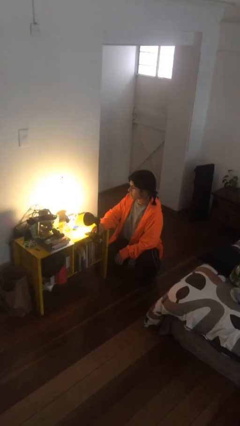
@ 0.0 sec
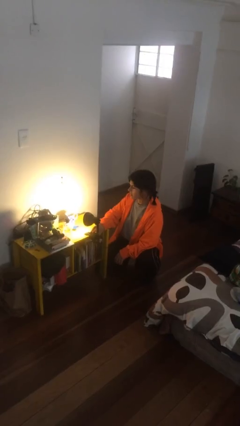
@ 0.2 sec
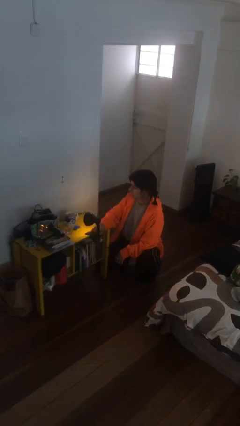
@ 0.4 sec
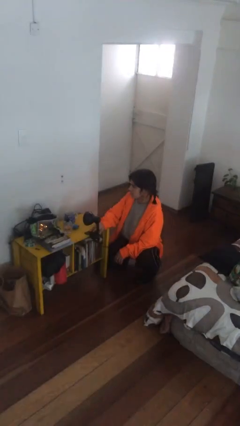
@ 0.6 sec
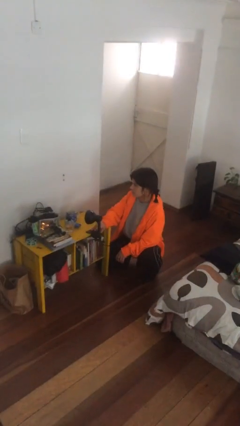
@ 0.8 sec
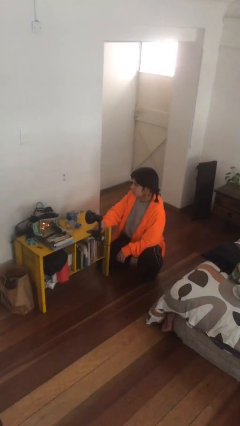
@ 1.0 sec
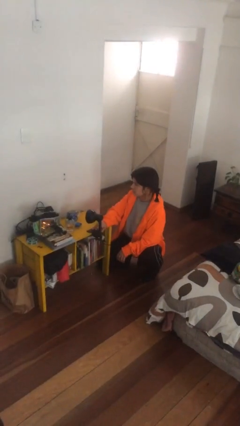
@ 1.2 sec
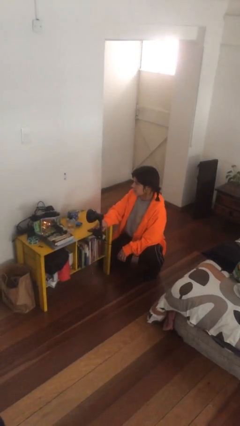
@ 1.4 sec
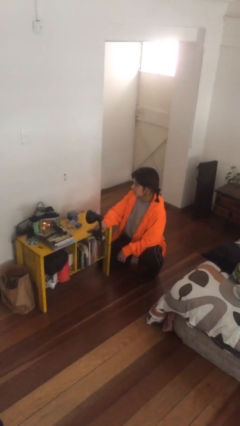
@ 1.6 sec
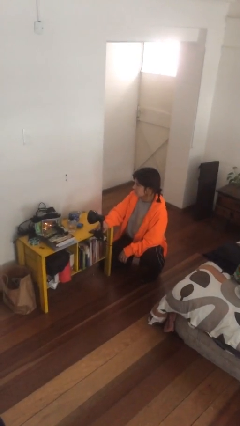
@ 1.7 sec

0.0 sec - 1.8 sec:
person turns off lamp

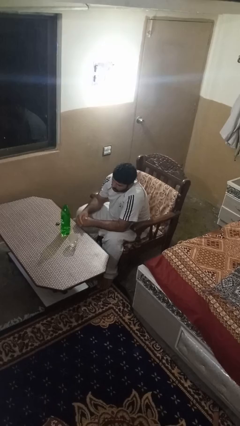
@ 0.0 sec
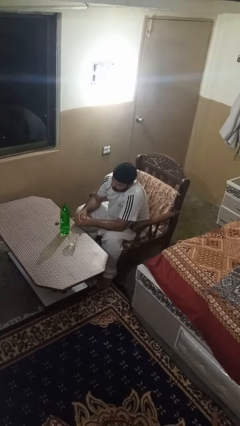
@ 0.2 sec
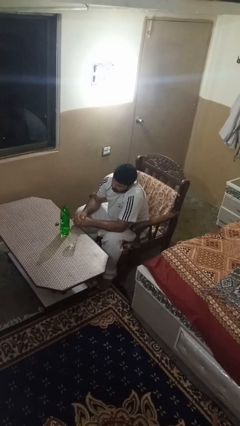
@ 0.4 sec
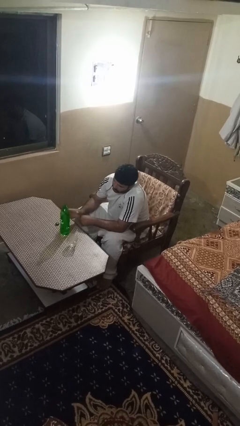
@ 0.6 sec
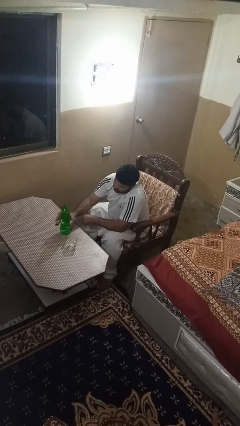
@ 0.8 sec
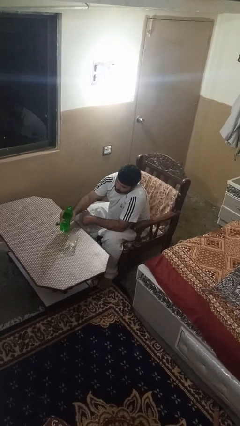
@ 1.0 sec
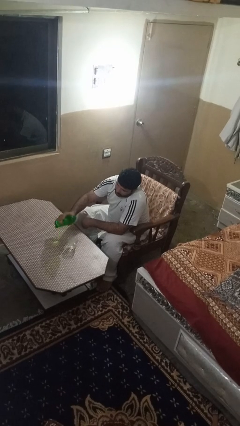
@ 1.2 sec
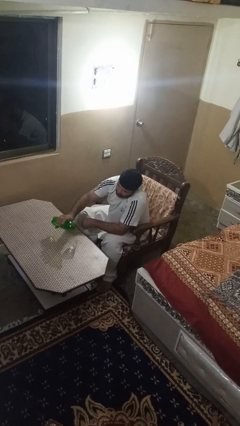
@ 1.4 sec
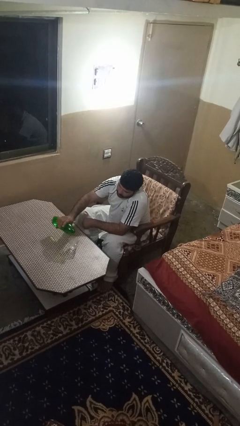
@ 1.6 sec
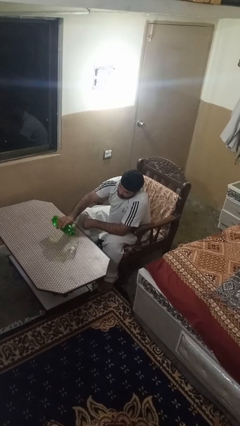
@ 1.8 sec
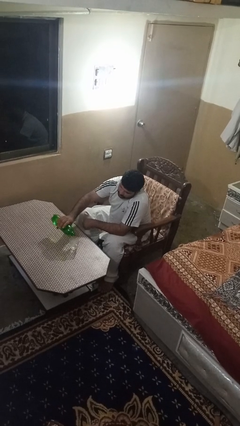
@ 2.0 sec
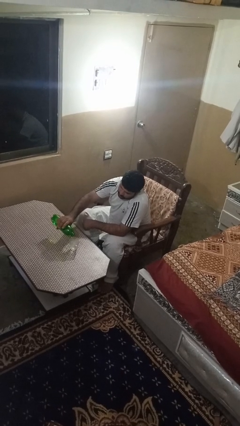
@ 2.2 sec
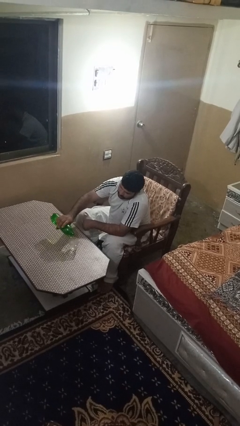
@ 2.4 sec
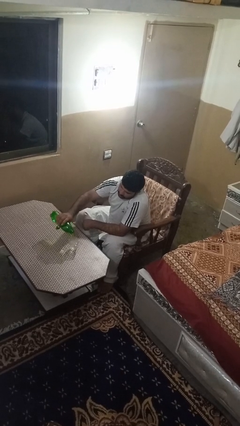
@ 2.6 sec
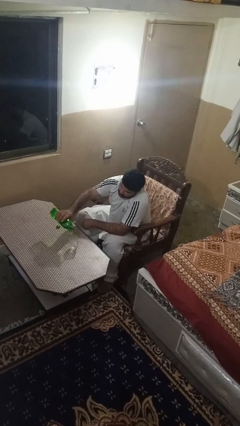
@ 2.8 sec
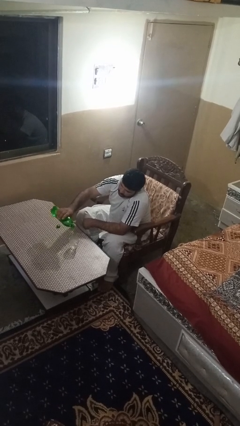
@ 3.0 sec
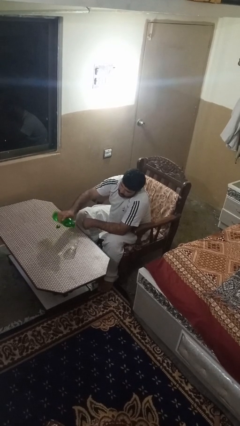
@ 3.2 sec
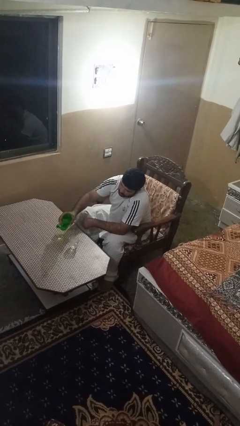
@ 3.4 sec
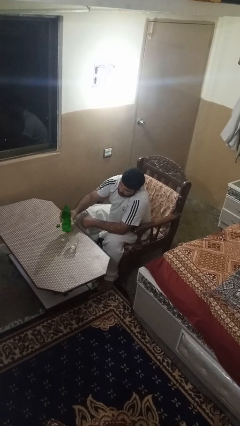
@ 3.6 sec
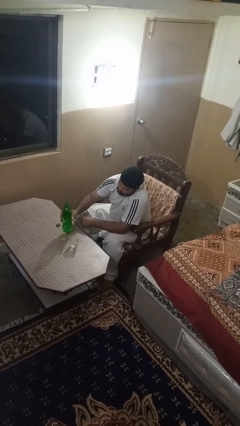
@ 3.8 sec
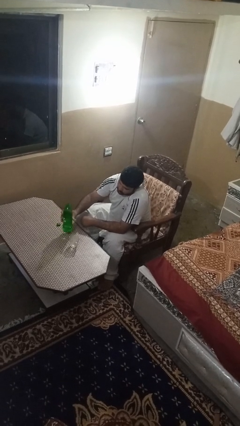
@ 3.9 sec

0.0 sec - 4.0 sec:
person pours liquid into cup

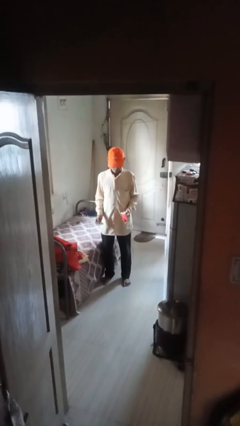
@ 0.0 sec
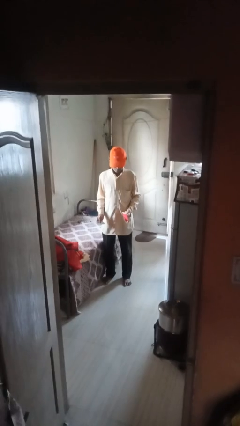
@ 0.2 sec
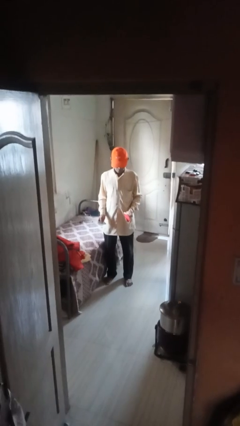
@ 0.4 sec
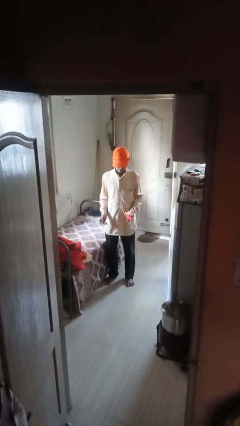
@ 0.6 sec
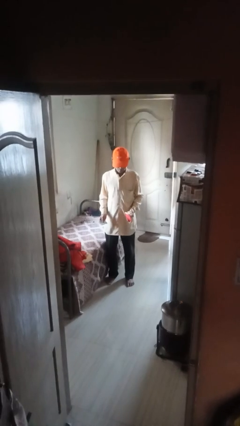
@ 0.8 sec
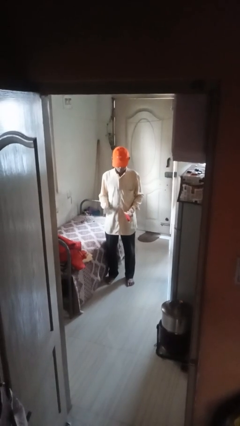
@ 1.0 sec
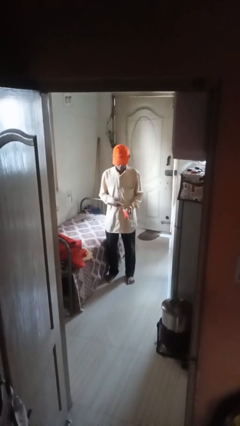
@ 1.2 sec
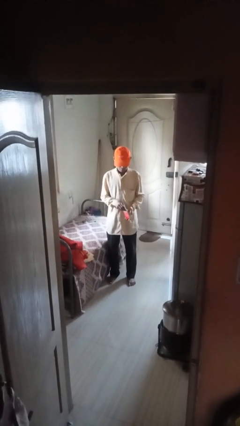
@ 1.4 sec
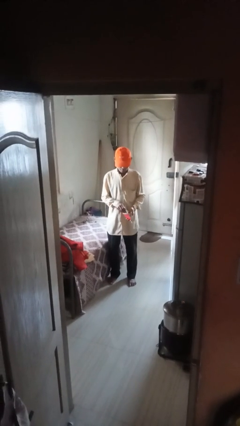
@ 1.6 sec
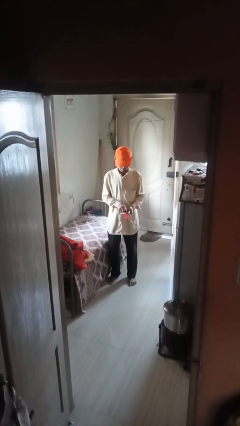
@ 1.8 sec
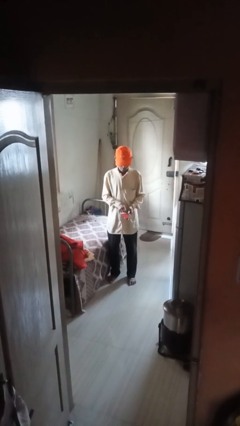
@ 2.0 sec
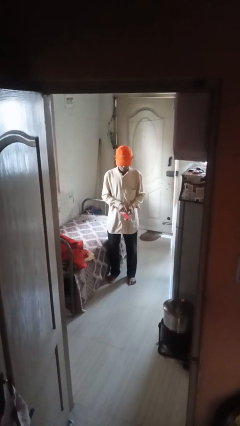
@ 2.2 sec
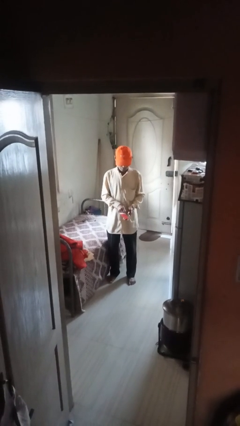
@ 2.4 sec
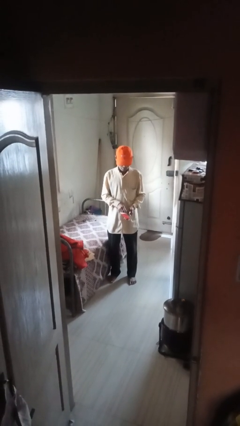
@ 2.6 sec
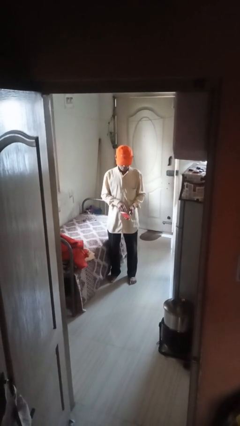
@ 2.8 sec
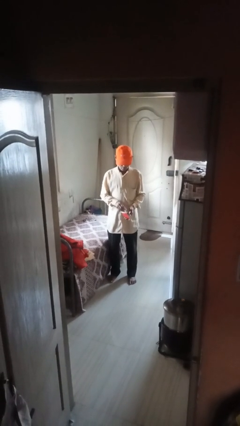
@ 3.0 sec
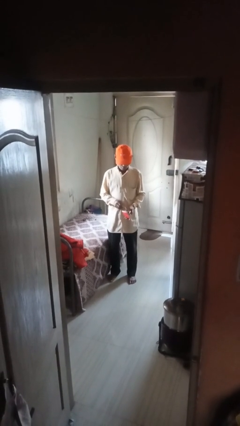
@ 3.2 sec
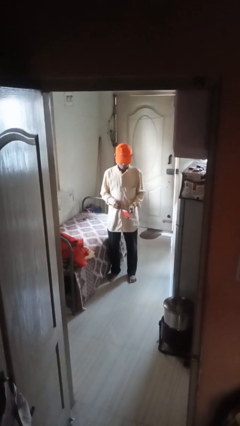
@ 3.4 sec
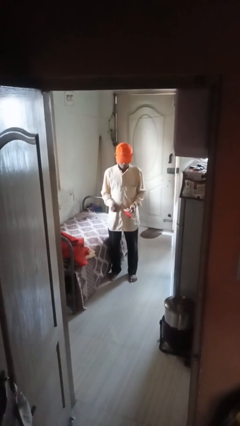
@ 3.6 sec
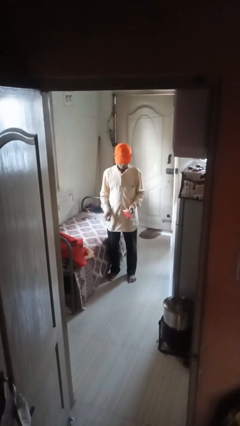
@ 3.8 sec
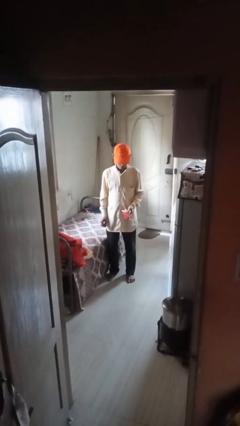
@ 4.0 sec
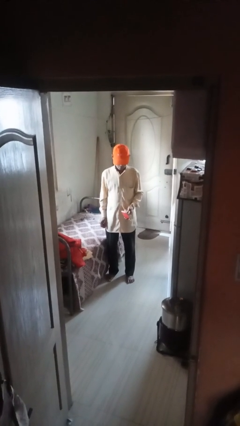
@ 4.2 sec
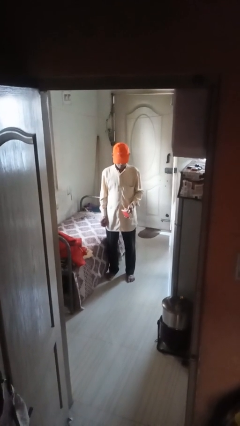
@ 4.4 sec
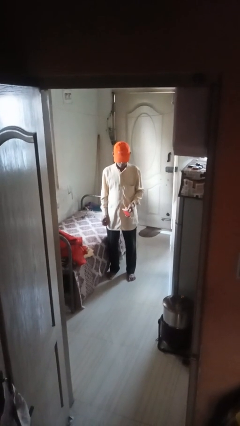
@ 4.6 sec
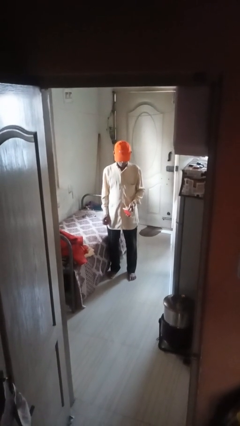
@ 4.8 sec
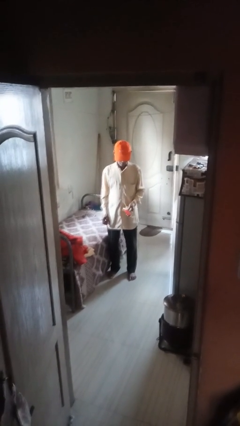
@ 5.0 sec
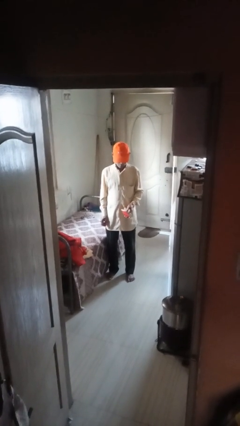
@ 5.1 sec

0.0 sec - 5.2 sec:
person puts object into purse

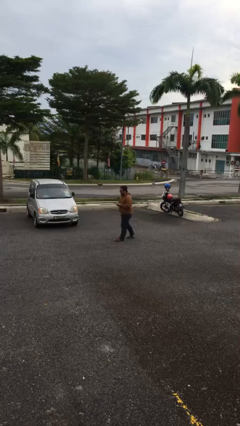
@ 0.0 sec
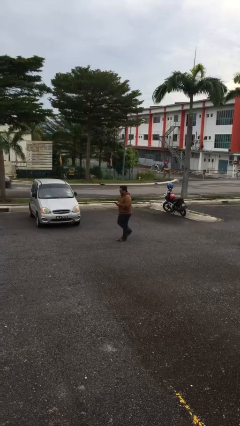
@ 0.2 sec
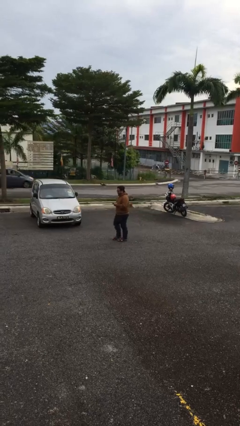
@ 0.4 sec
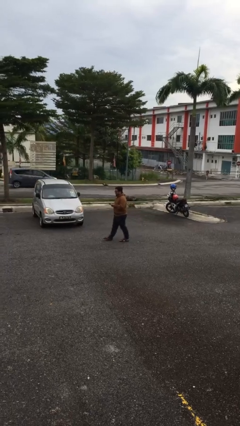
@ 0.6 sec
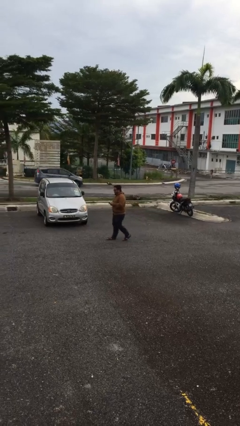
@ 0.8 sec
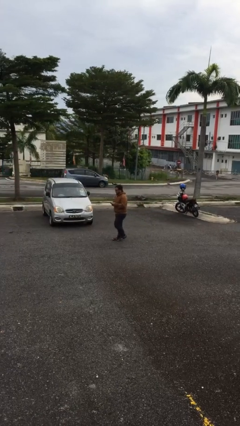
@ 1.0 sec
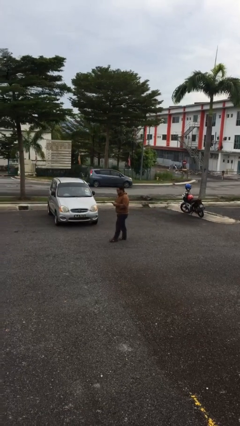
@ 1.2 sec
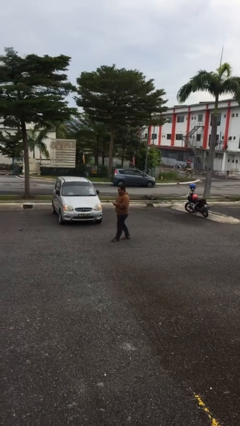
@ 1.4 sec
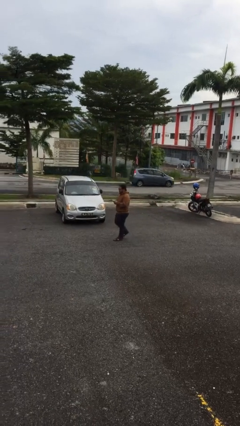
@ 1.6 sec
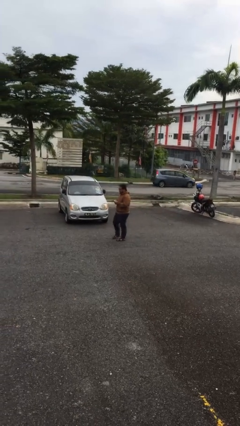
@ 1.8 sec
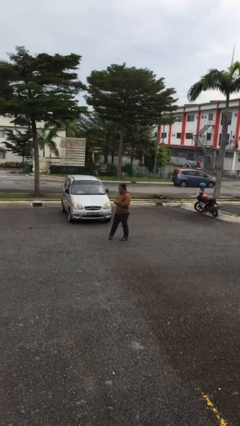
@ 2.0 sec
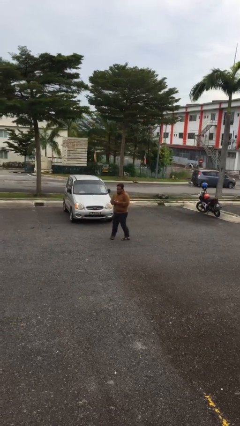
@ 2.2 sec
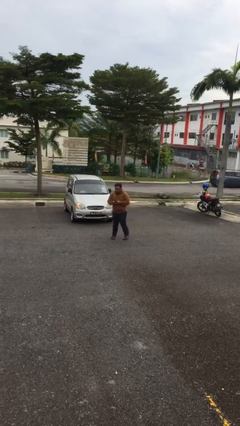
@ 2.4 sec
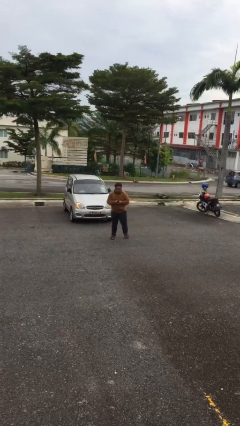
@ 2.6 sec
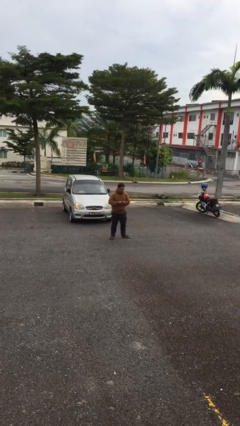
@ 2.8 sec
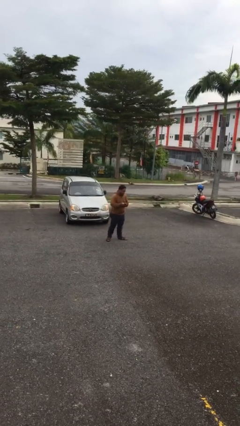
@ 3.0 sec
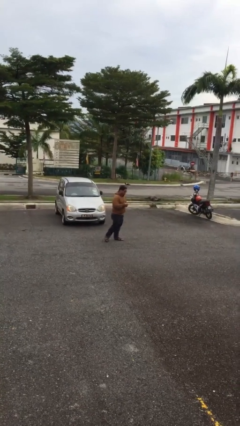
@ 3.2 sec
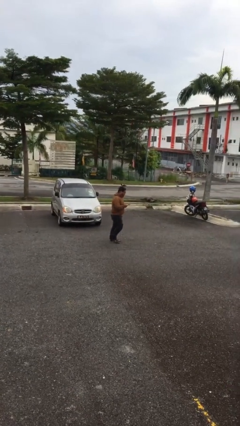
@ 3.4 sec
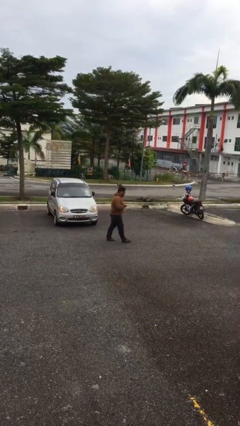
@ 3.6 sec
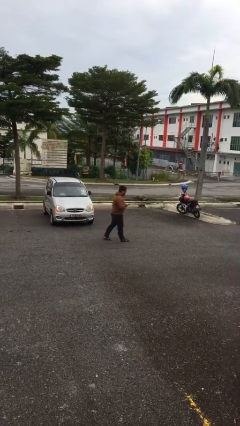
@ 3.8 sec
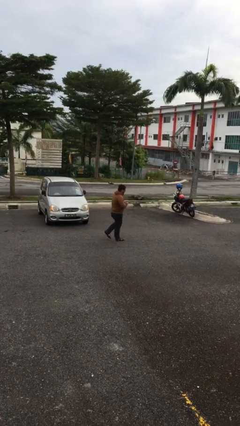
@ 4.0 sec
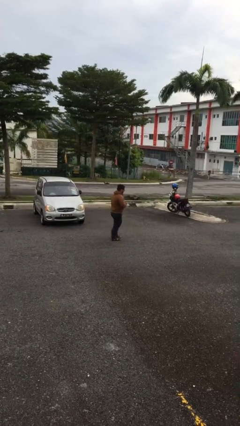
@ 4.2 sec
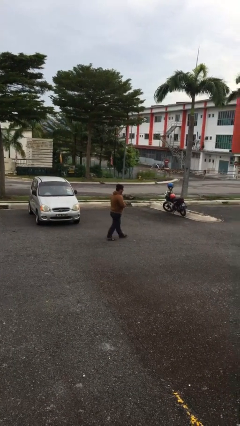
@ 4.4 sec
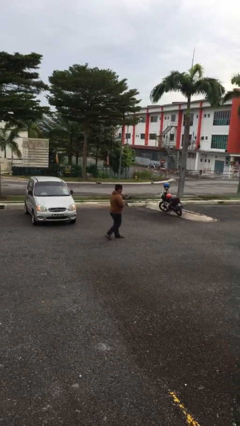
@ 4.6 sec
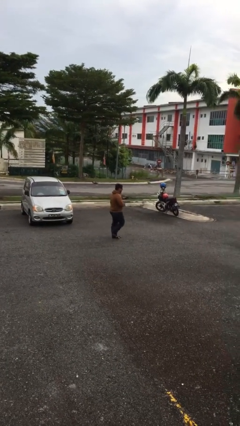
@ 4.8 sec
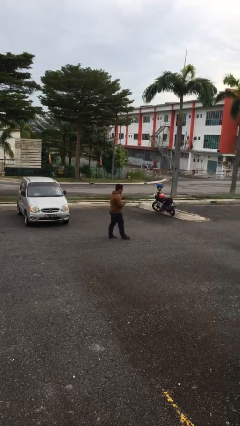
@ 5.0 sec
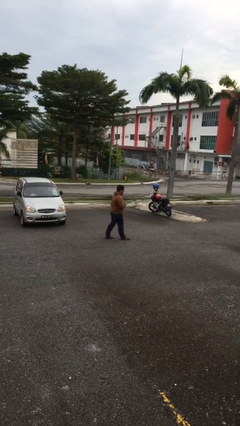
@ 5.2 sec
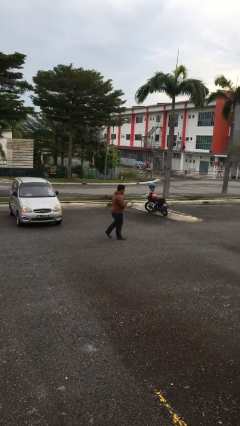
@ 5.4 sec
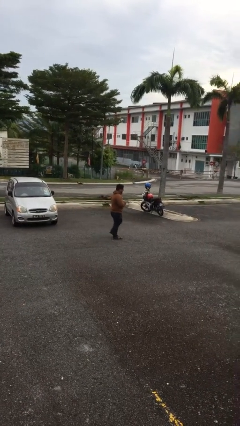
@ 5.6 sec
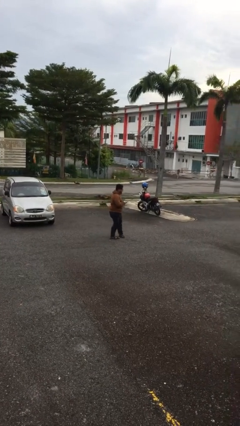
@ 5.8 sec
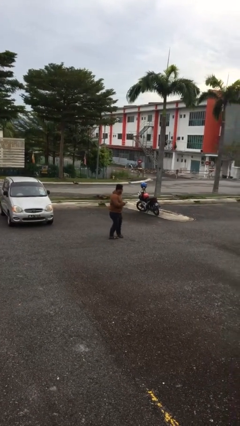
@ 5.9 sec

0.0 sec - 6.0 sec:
person texts on phone

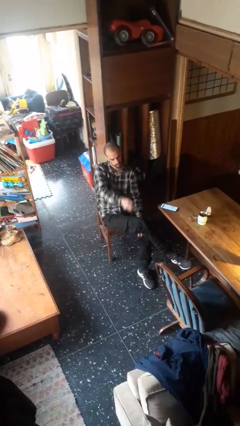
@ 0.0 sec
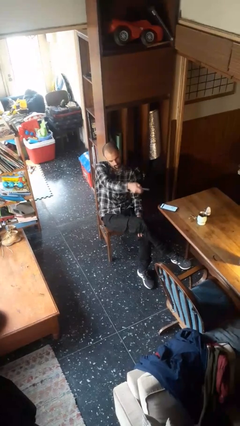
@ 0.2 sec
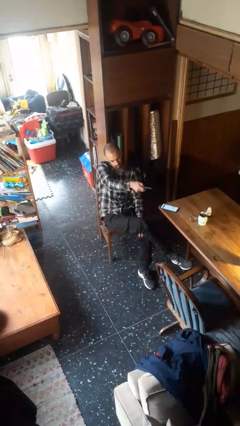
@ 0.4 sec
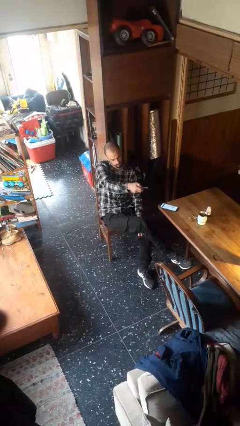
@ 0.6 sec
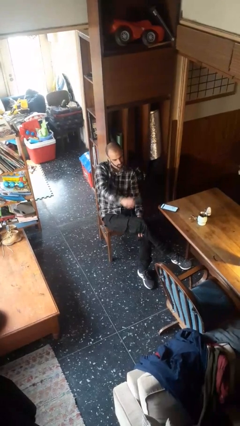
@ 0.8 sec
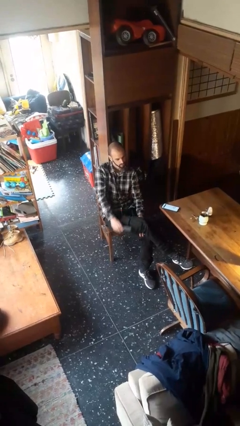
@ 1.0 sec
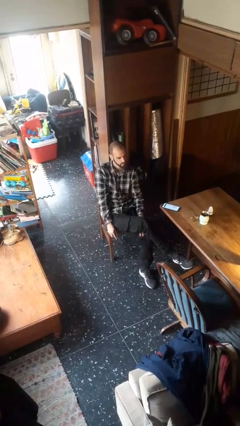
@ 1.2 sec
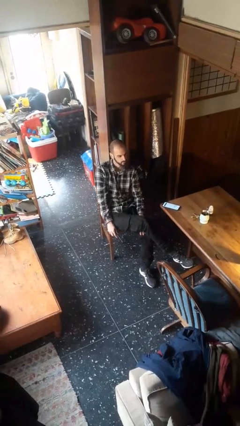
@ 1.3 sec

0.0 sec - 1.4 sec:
person uses television remote
